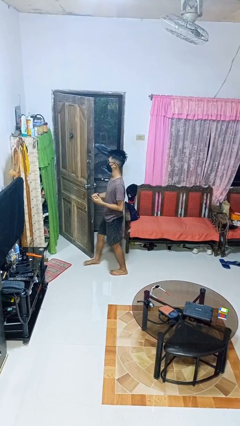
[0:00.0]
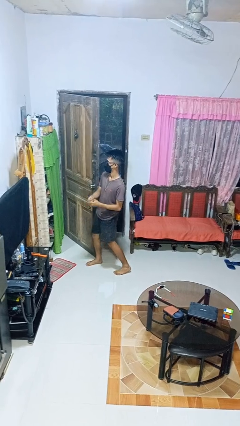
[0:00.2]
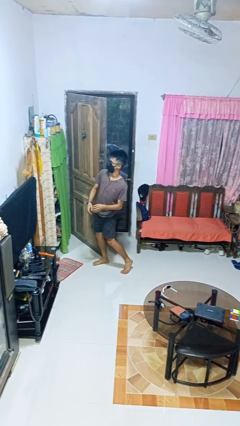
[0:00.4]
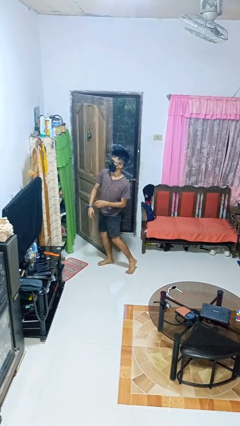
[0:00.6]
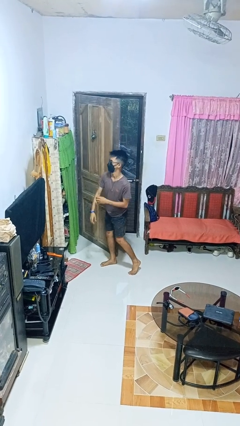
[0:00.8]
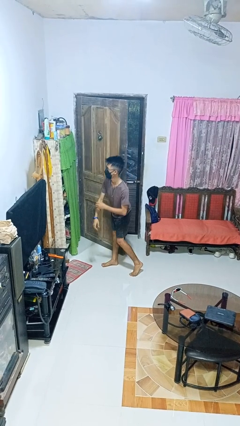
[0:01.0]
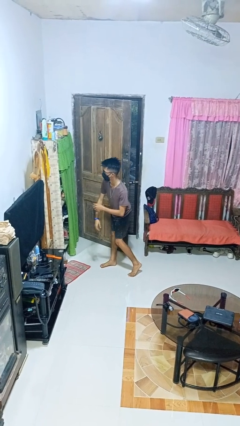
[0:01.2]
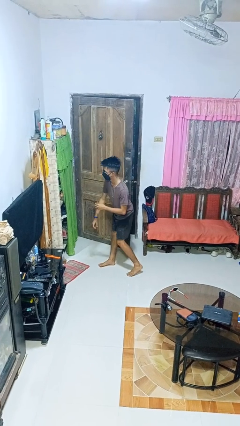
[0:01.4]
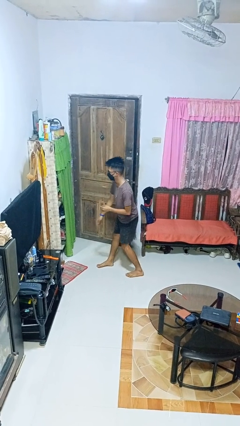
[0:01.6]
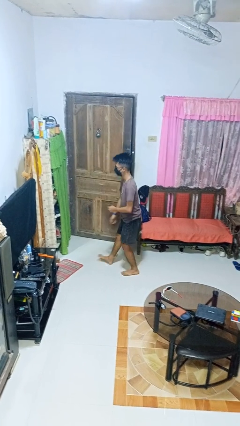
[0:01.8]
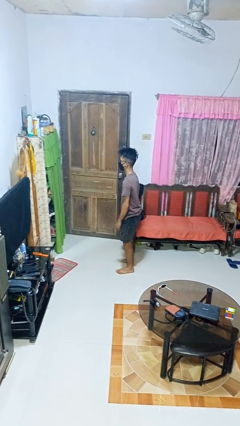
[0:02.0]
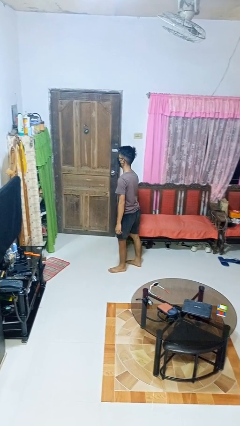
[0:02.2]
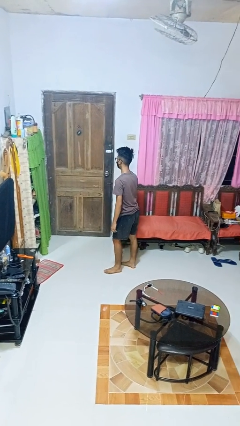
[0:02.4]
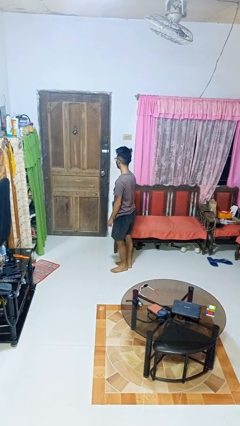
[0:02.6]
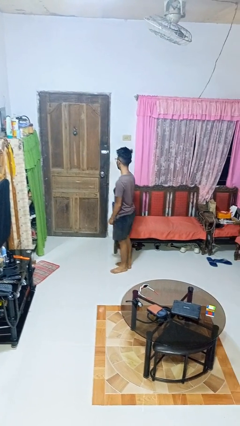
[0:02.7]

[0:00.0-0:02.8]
person closes door with hip

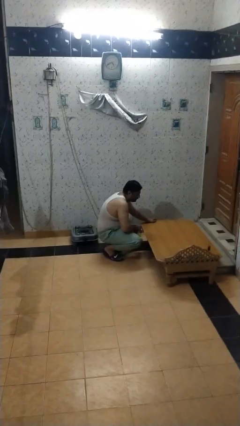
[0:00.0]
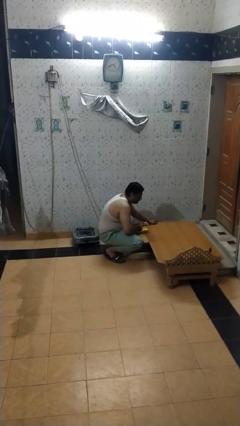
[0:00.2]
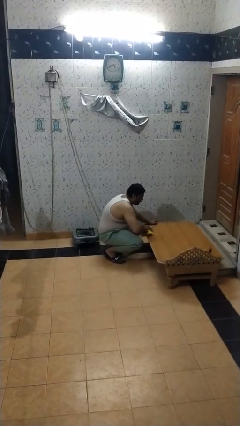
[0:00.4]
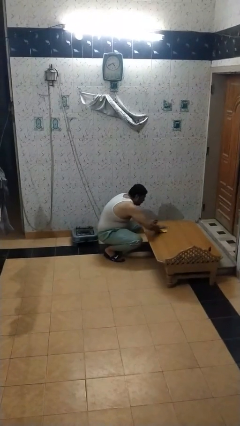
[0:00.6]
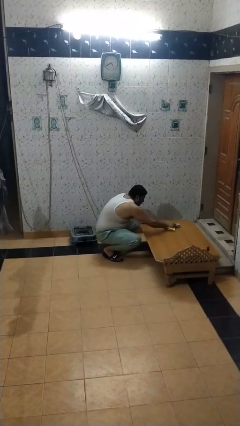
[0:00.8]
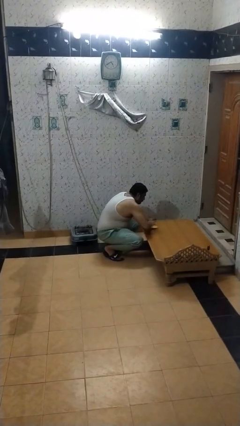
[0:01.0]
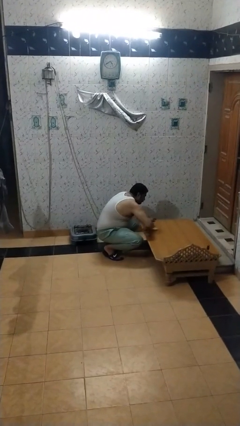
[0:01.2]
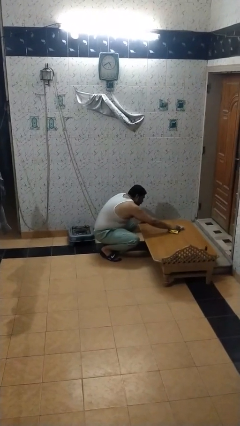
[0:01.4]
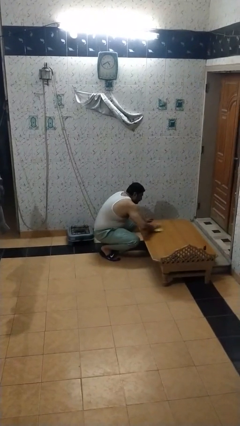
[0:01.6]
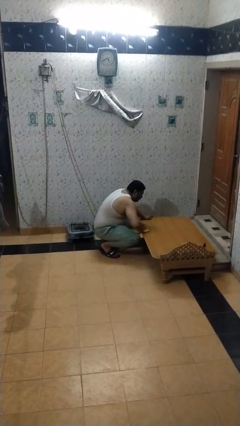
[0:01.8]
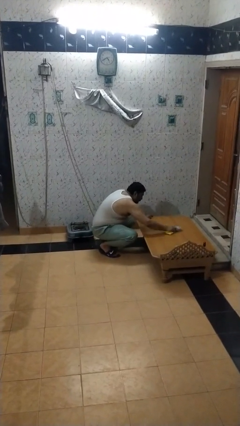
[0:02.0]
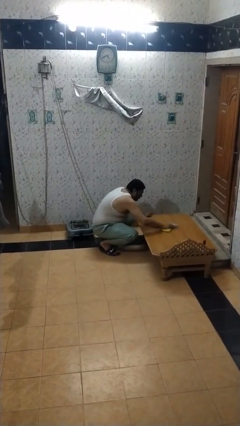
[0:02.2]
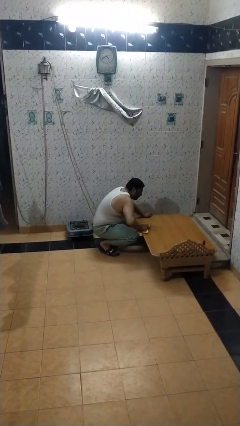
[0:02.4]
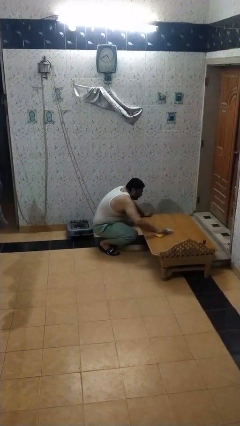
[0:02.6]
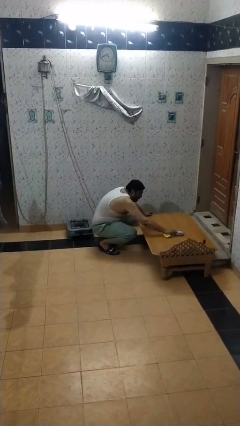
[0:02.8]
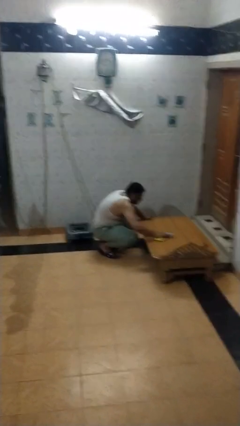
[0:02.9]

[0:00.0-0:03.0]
person cleans table with rag

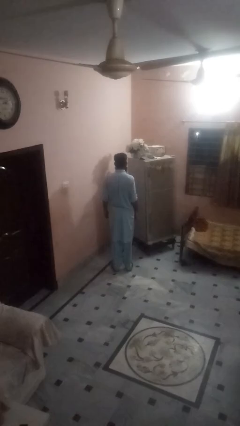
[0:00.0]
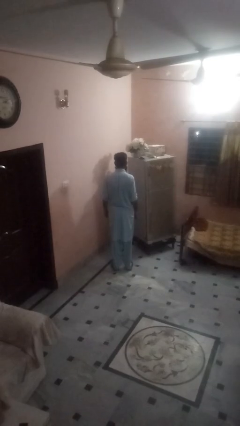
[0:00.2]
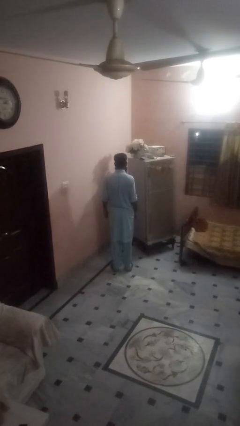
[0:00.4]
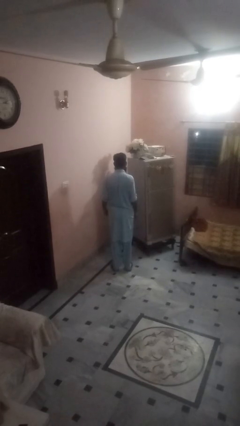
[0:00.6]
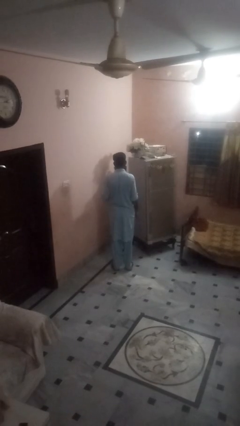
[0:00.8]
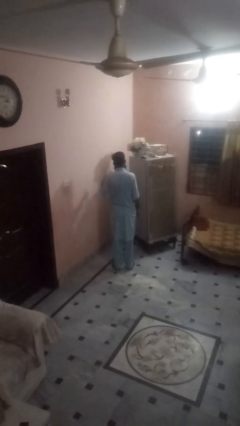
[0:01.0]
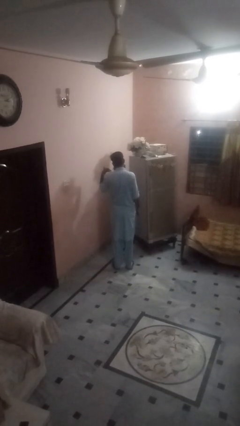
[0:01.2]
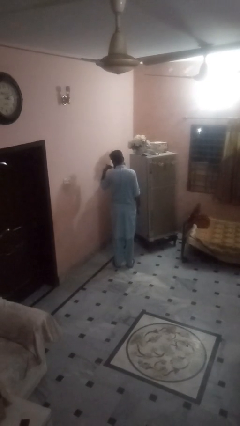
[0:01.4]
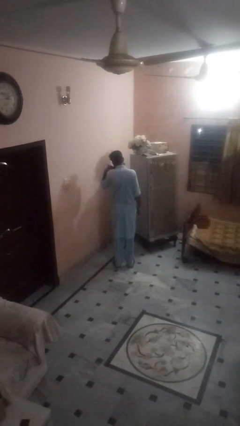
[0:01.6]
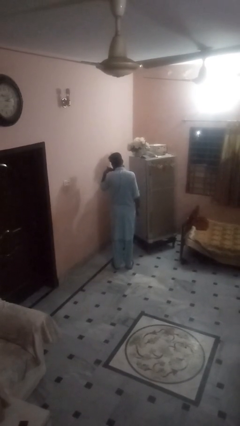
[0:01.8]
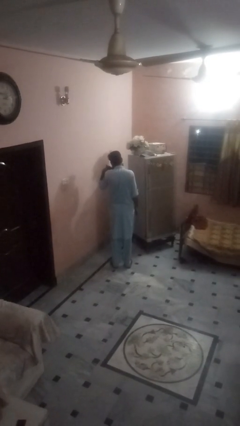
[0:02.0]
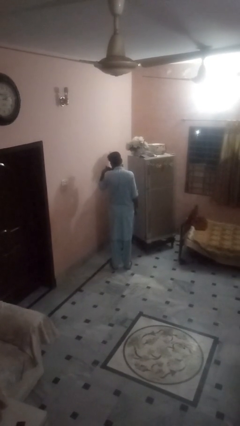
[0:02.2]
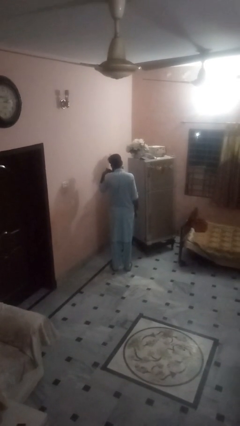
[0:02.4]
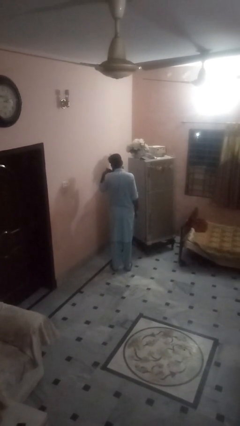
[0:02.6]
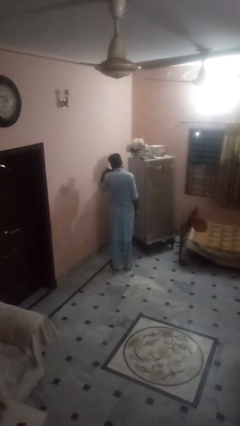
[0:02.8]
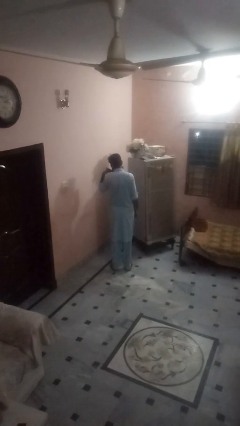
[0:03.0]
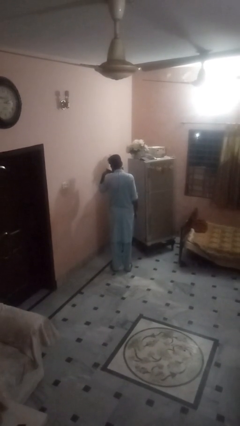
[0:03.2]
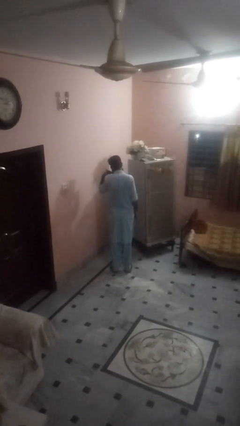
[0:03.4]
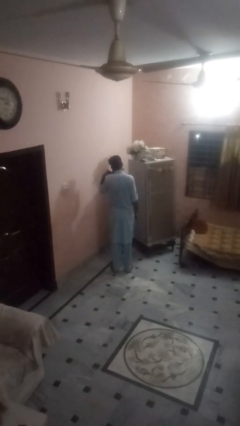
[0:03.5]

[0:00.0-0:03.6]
person gestures call me

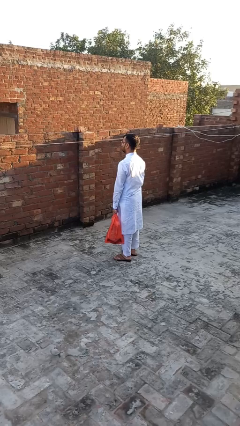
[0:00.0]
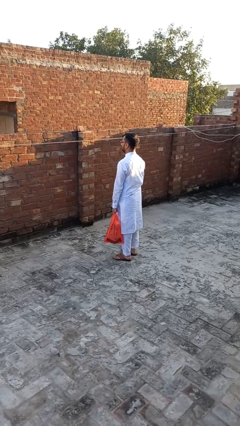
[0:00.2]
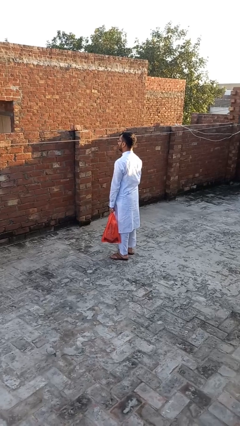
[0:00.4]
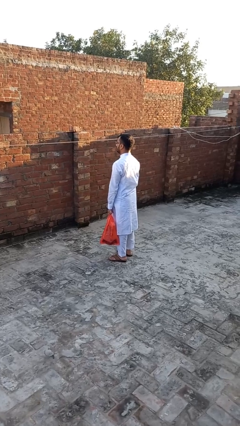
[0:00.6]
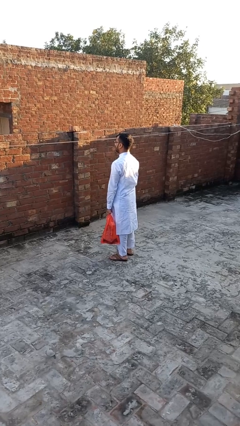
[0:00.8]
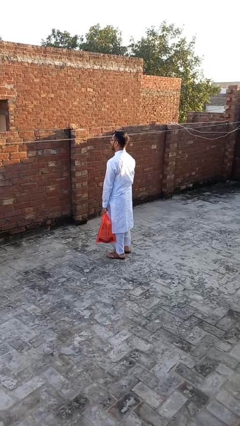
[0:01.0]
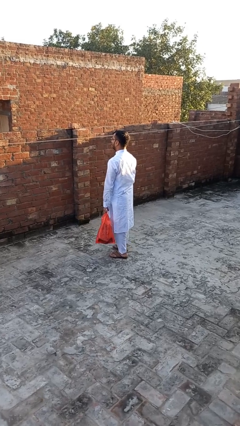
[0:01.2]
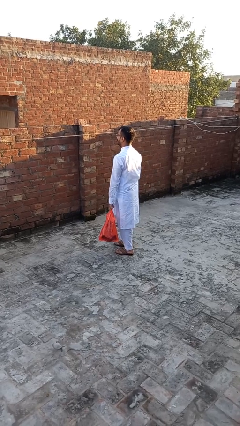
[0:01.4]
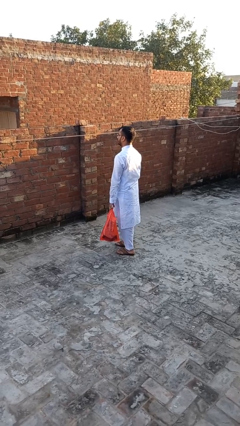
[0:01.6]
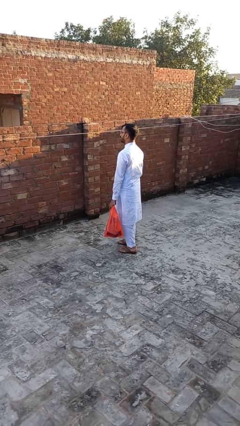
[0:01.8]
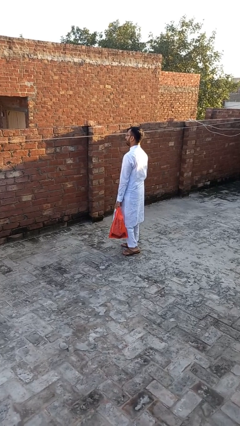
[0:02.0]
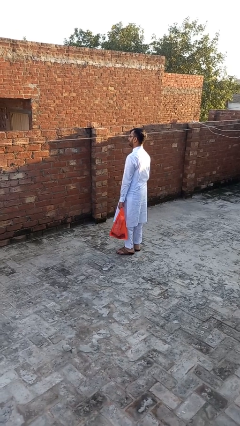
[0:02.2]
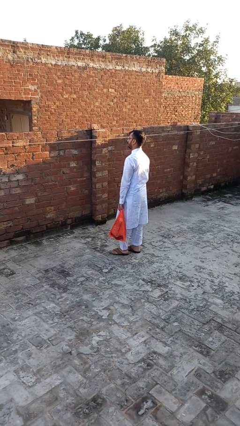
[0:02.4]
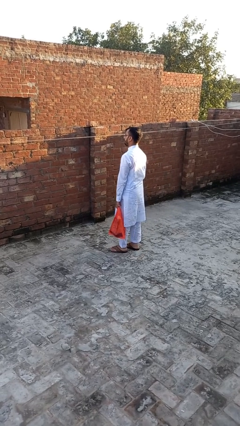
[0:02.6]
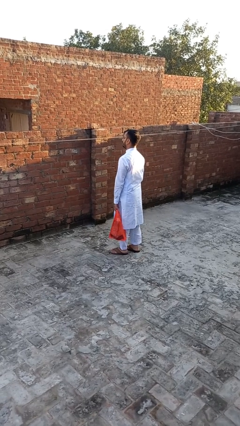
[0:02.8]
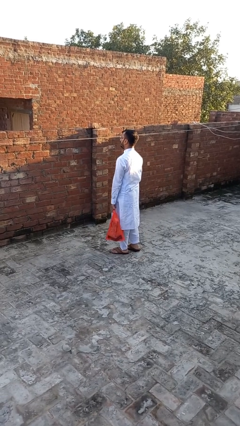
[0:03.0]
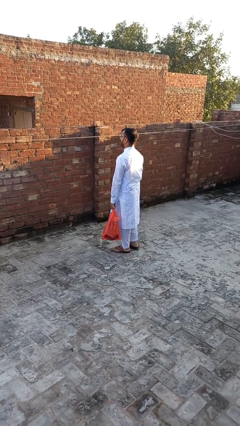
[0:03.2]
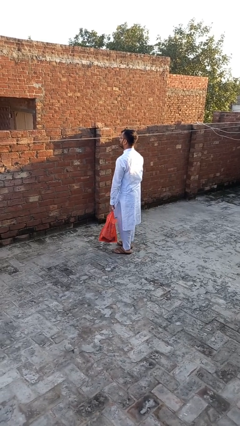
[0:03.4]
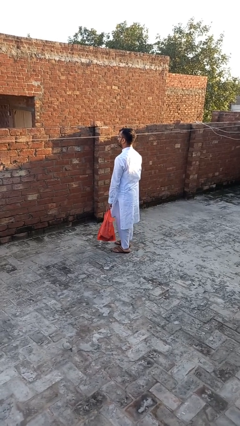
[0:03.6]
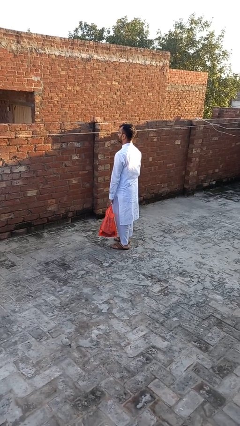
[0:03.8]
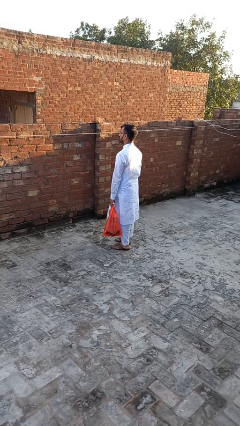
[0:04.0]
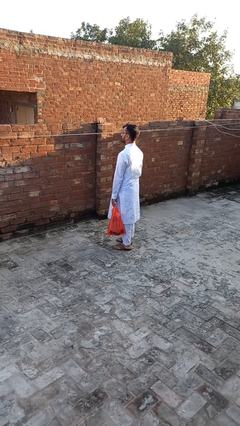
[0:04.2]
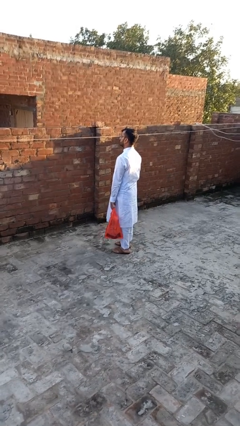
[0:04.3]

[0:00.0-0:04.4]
person carries groceries

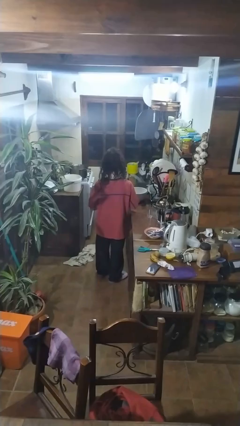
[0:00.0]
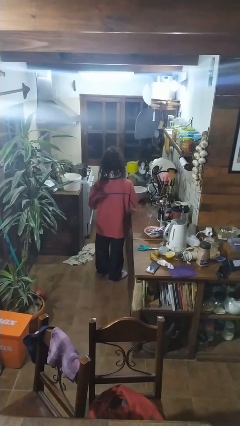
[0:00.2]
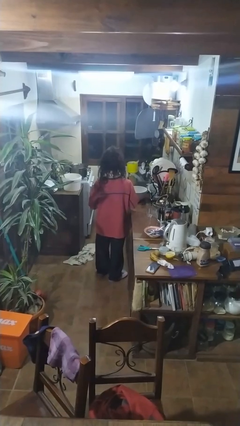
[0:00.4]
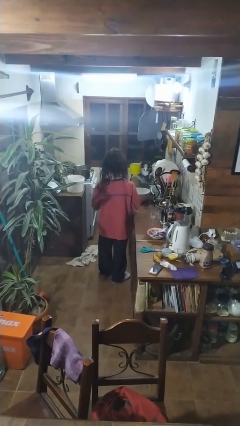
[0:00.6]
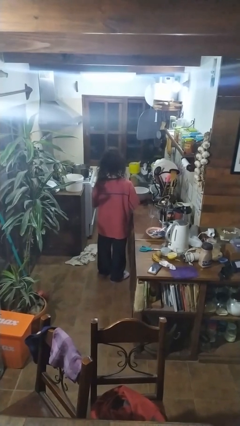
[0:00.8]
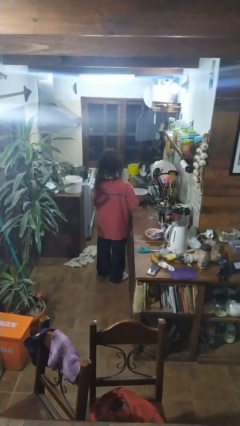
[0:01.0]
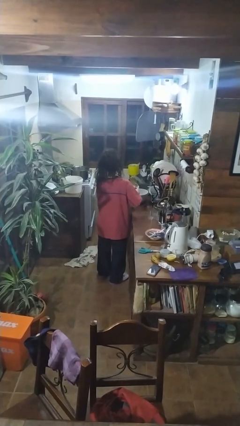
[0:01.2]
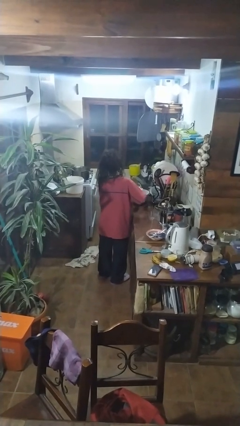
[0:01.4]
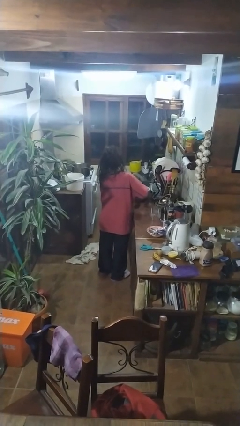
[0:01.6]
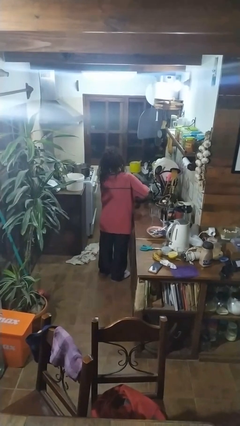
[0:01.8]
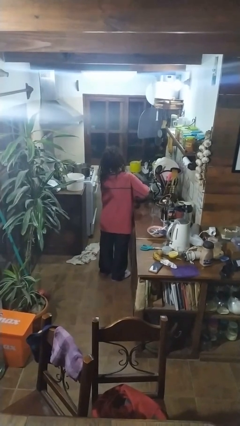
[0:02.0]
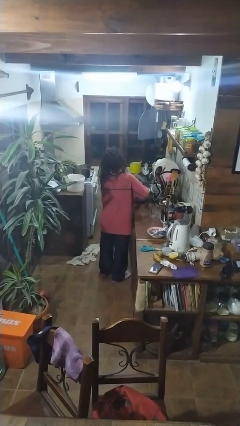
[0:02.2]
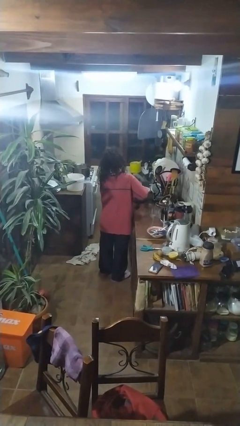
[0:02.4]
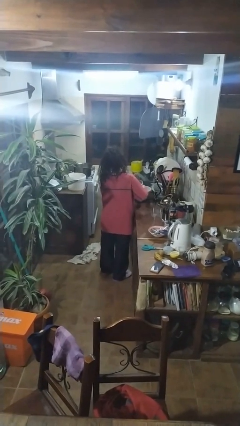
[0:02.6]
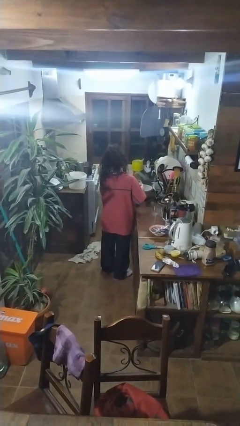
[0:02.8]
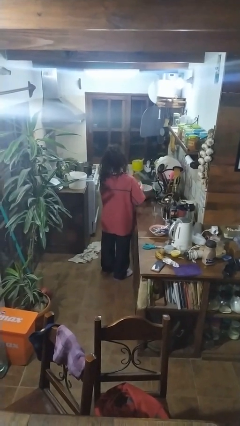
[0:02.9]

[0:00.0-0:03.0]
person pours into bowl

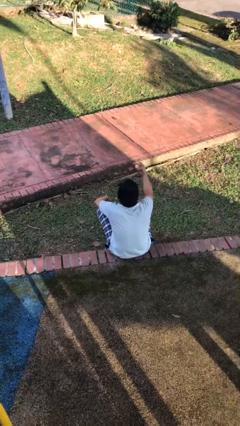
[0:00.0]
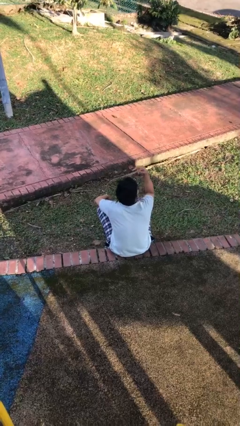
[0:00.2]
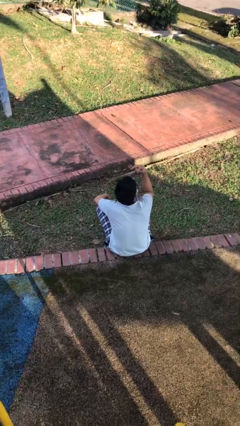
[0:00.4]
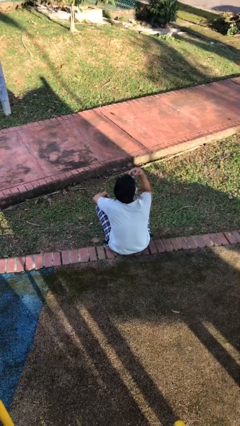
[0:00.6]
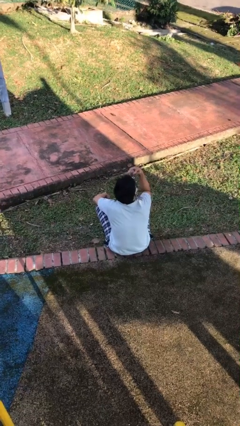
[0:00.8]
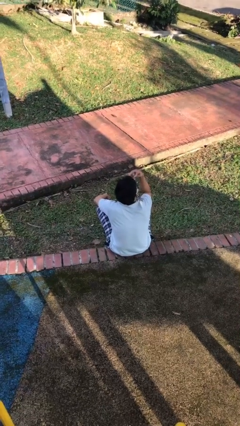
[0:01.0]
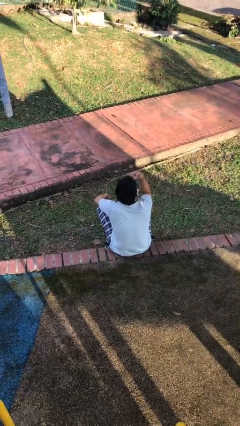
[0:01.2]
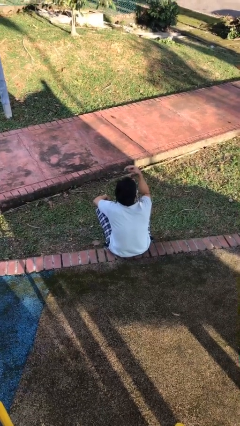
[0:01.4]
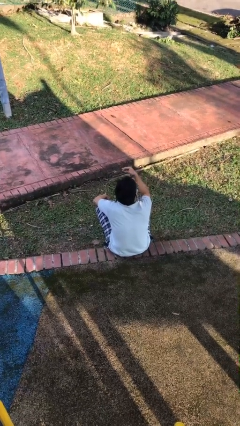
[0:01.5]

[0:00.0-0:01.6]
person gestures watch closely
